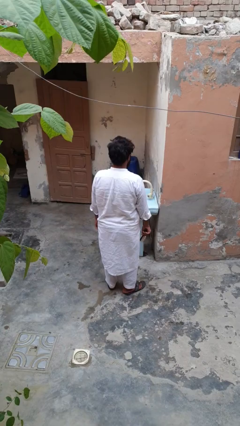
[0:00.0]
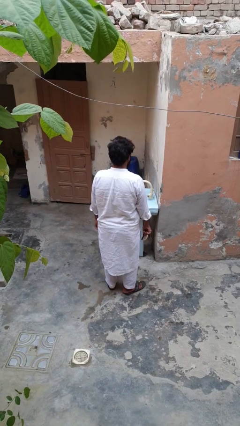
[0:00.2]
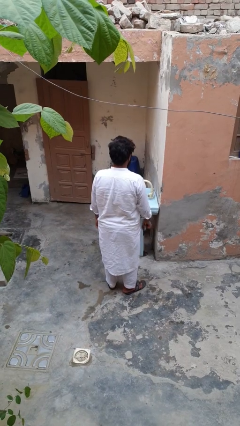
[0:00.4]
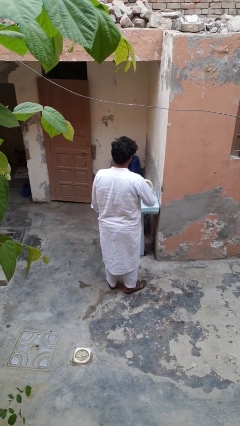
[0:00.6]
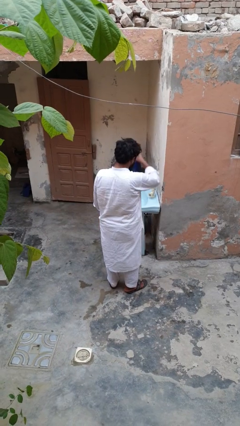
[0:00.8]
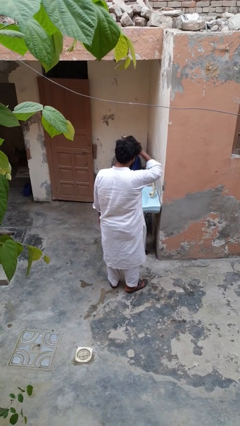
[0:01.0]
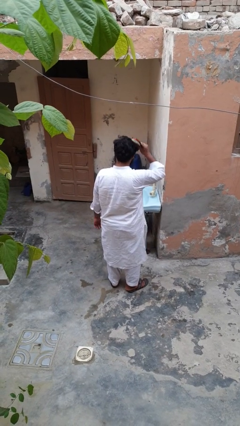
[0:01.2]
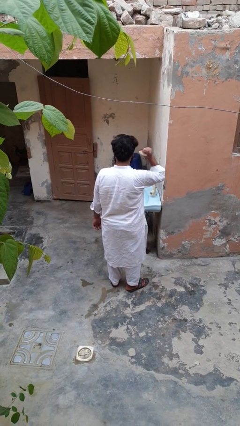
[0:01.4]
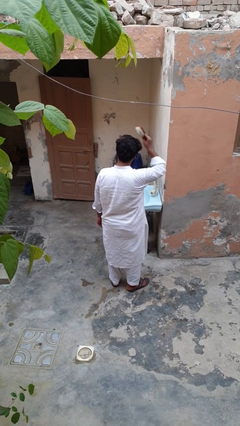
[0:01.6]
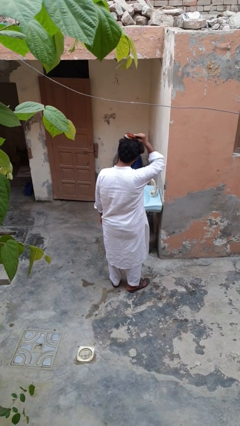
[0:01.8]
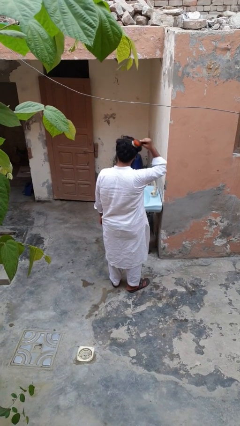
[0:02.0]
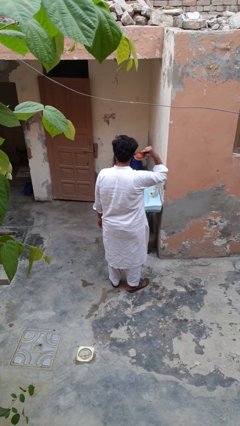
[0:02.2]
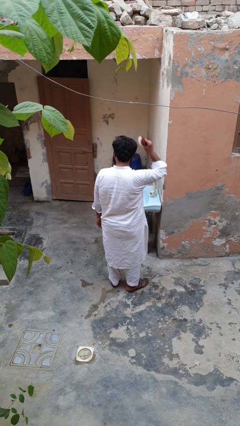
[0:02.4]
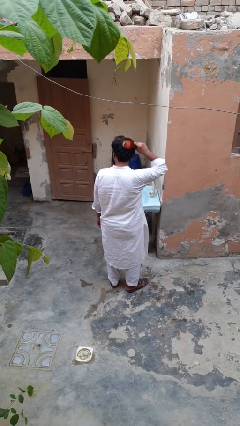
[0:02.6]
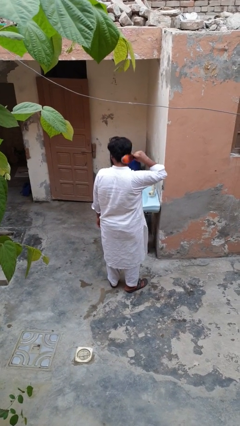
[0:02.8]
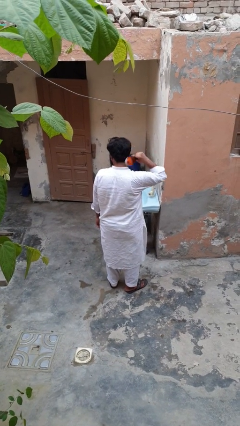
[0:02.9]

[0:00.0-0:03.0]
person brushes hair

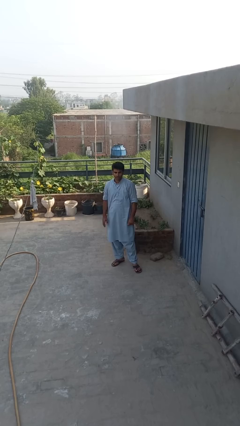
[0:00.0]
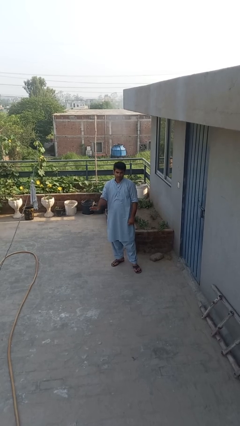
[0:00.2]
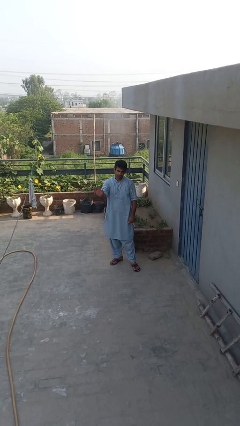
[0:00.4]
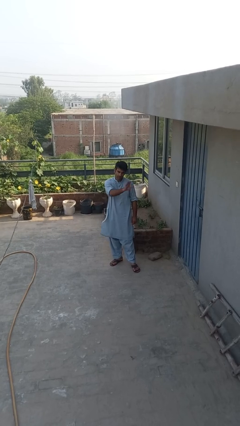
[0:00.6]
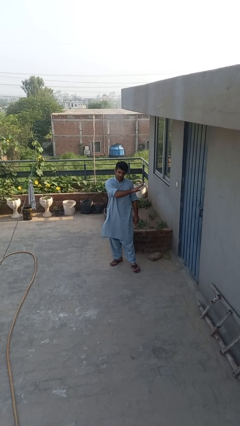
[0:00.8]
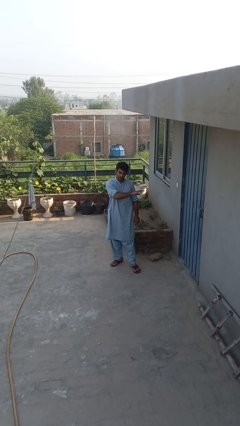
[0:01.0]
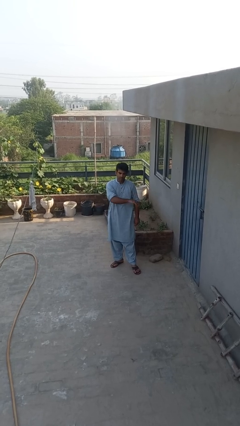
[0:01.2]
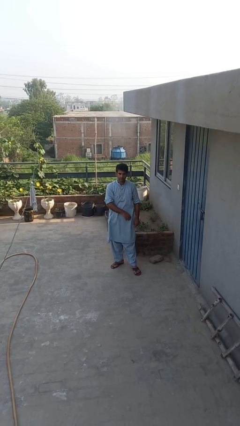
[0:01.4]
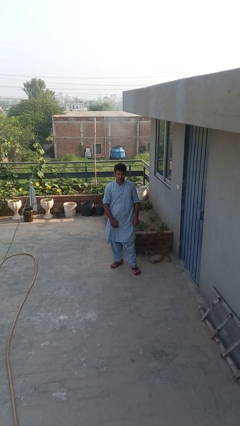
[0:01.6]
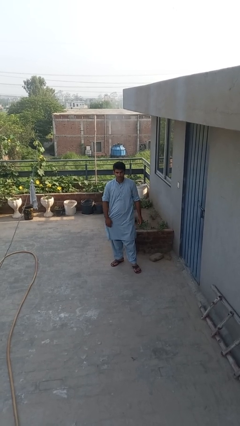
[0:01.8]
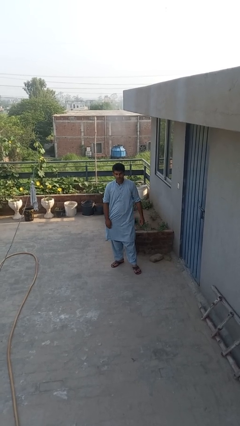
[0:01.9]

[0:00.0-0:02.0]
person gestures swipe left

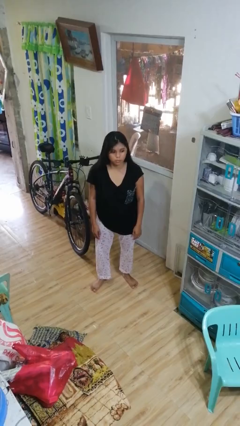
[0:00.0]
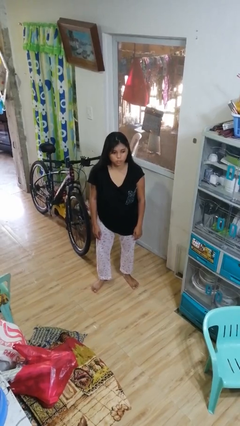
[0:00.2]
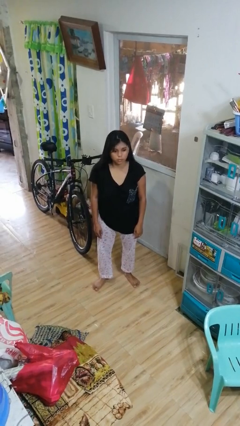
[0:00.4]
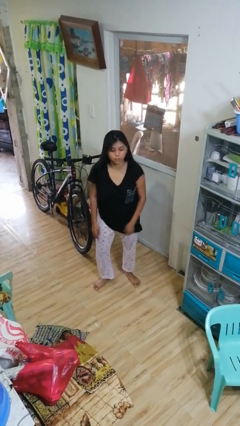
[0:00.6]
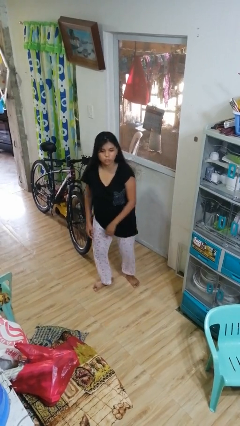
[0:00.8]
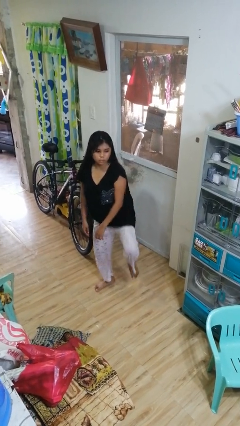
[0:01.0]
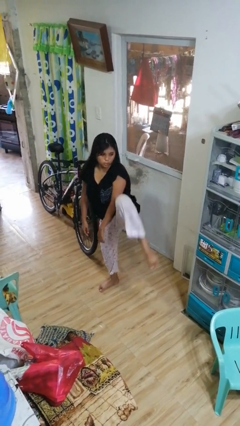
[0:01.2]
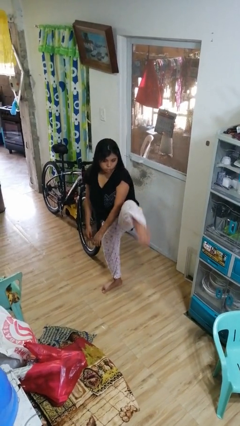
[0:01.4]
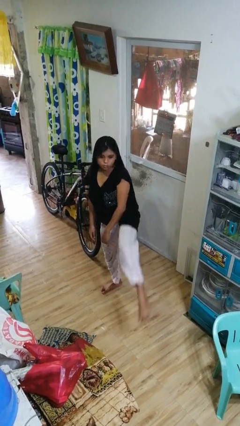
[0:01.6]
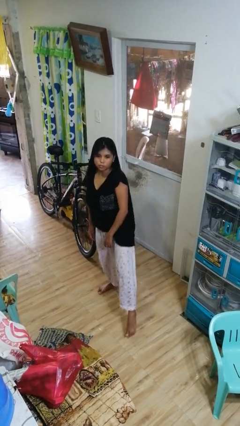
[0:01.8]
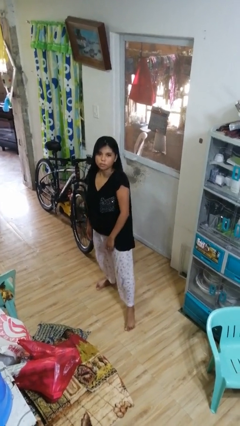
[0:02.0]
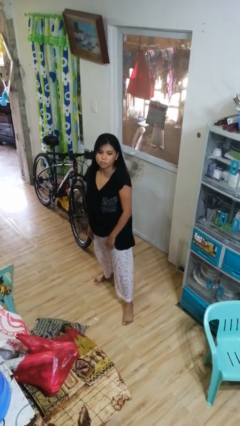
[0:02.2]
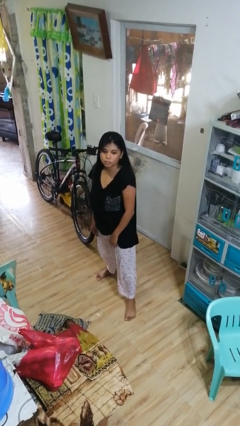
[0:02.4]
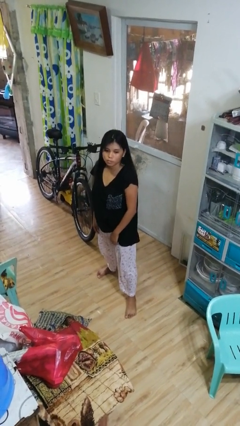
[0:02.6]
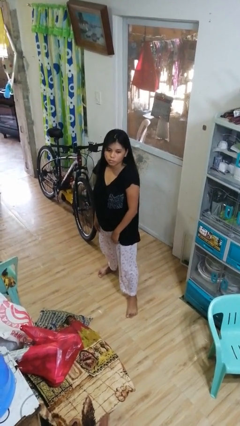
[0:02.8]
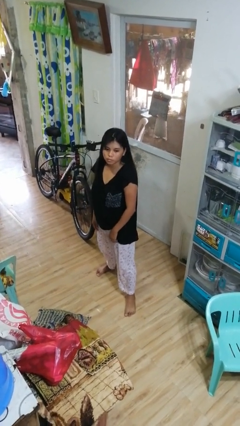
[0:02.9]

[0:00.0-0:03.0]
person karate kicks

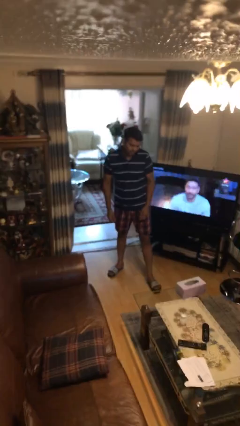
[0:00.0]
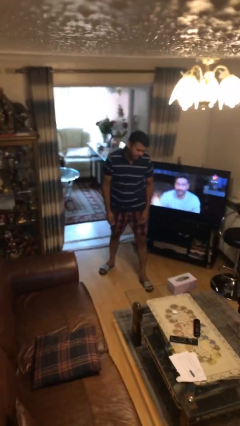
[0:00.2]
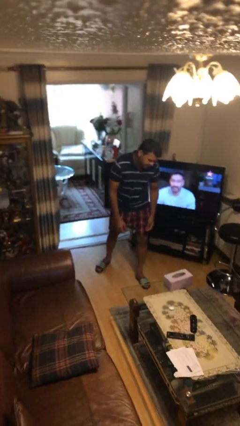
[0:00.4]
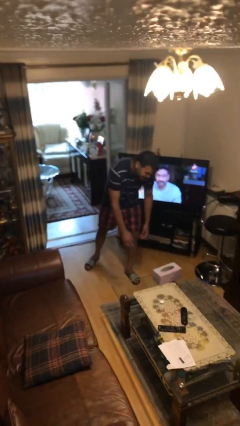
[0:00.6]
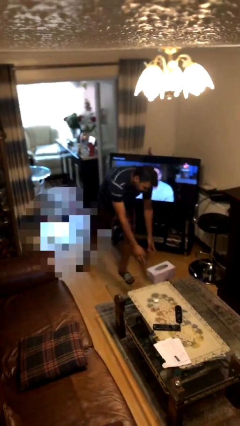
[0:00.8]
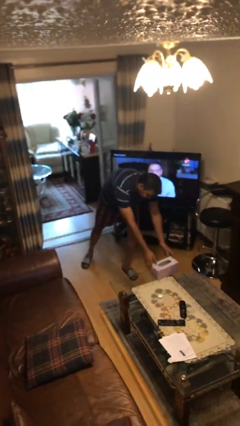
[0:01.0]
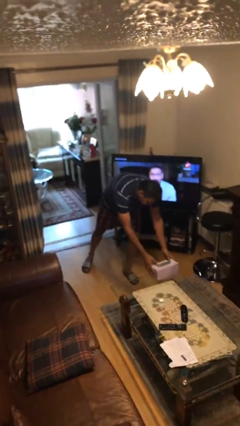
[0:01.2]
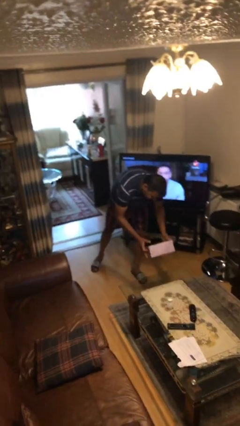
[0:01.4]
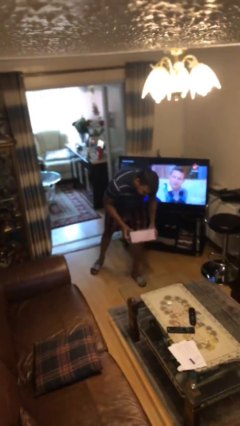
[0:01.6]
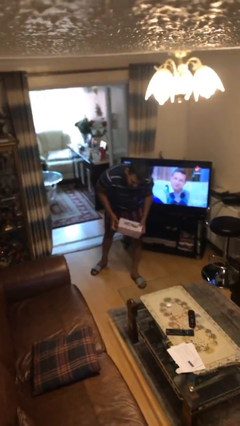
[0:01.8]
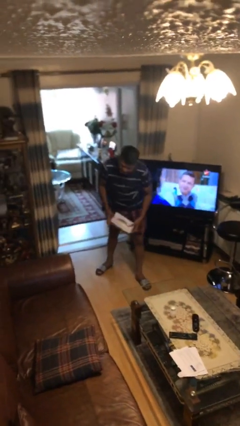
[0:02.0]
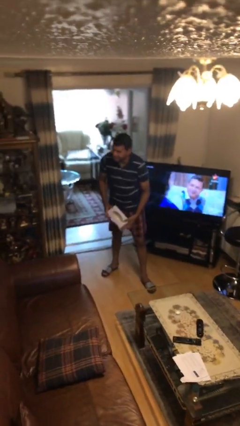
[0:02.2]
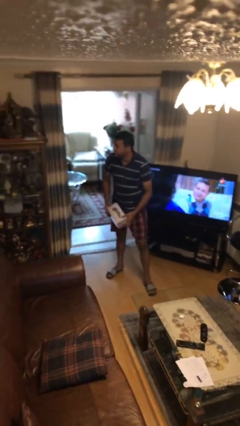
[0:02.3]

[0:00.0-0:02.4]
person picks up object from table

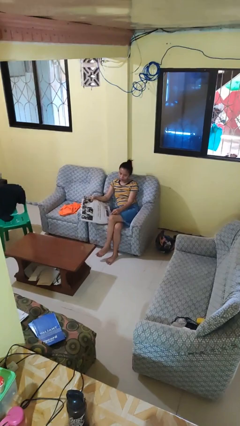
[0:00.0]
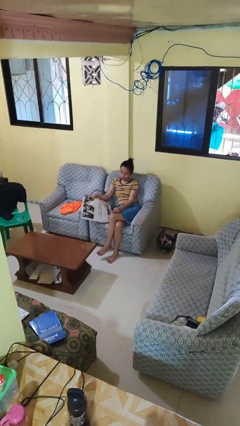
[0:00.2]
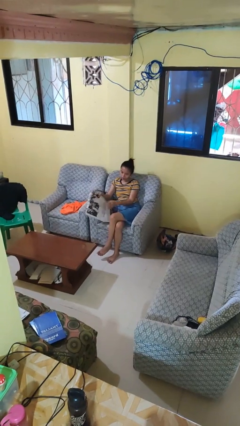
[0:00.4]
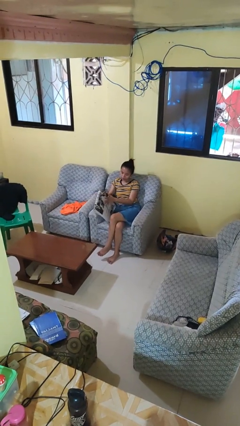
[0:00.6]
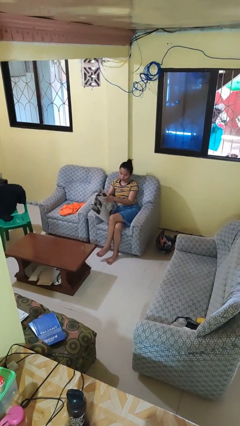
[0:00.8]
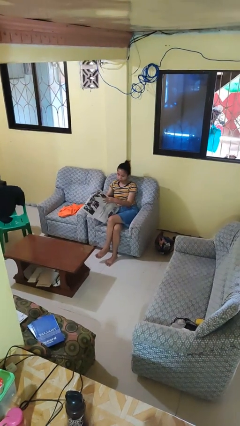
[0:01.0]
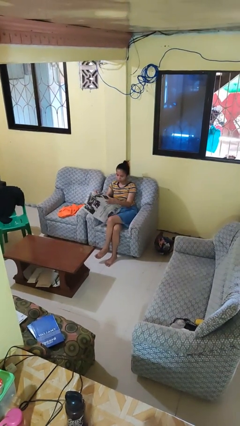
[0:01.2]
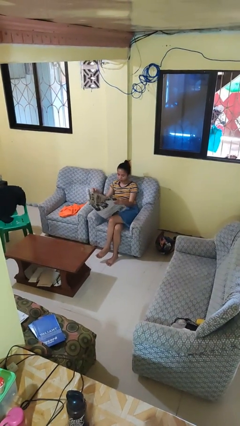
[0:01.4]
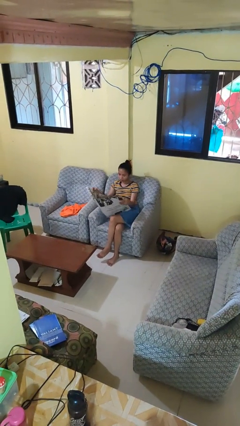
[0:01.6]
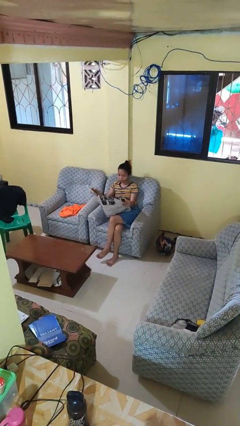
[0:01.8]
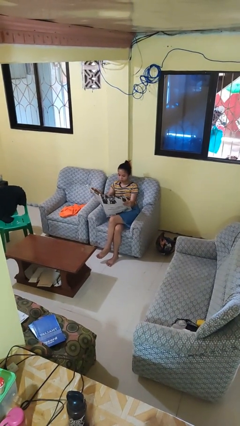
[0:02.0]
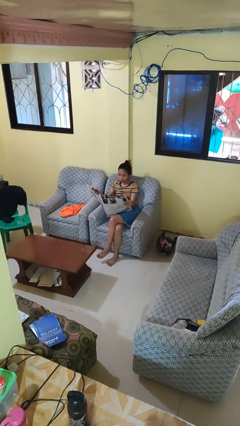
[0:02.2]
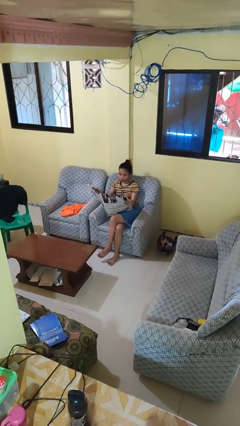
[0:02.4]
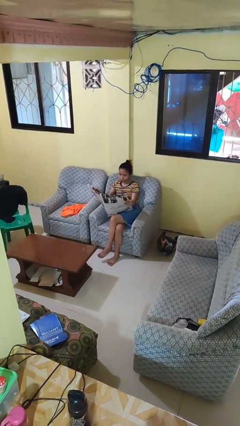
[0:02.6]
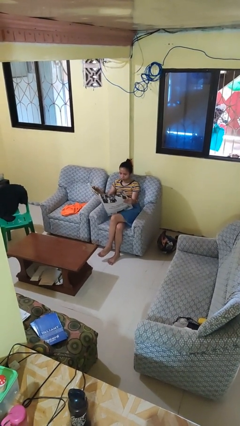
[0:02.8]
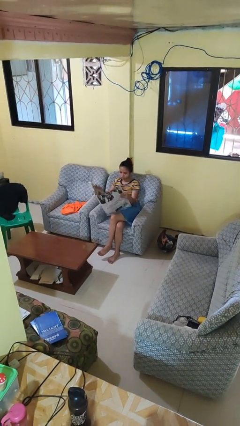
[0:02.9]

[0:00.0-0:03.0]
person reads newspaper

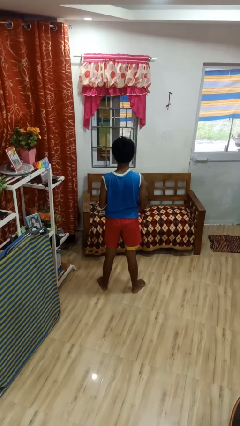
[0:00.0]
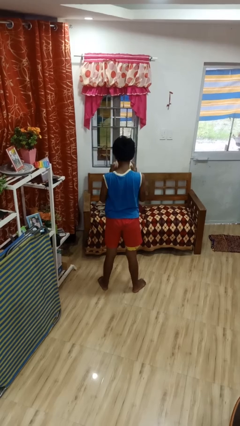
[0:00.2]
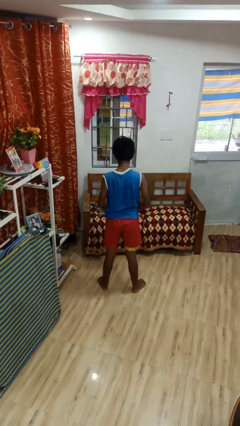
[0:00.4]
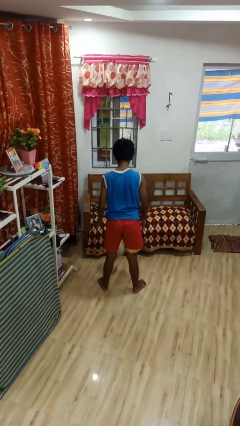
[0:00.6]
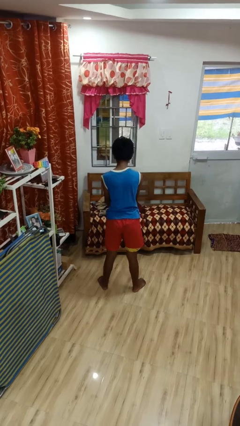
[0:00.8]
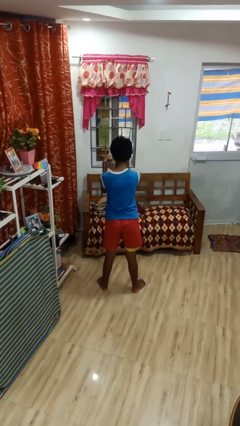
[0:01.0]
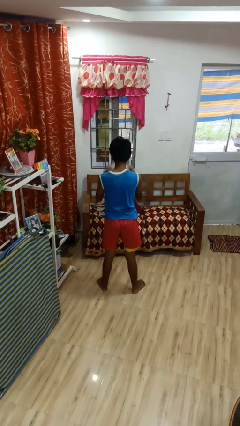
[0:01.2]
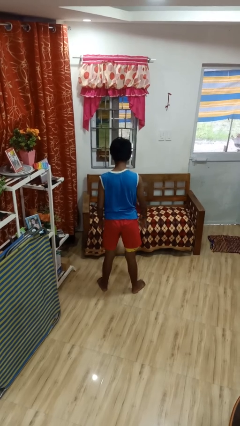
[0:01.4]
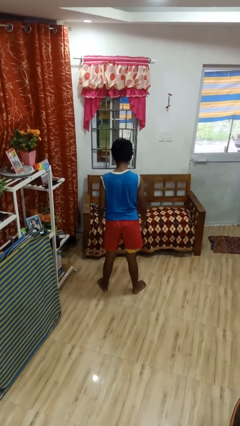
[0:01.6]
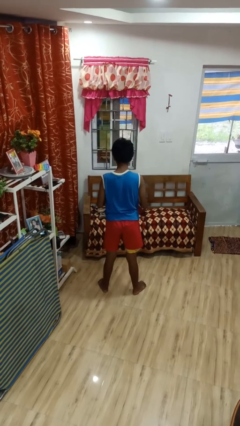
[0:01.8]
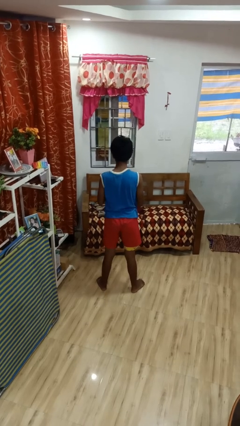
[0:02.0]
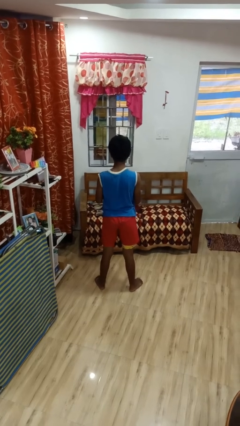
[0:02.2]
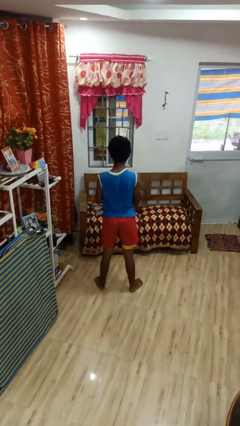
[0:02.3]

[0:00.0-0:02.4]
person bounces ball on floor

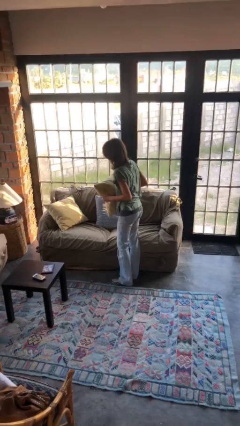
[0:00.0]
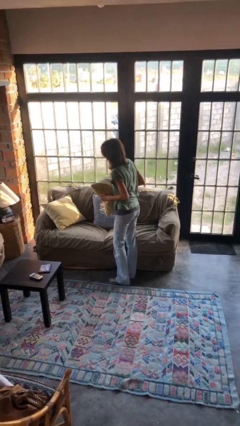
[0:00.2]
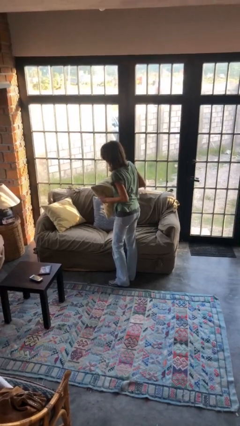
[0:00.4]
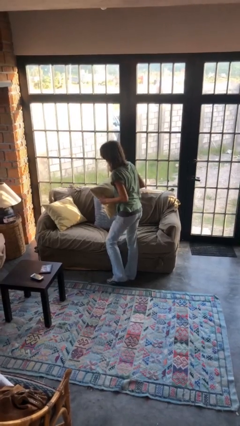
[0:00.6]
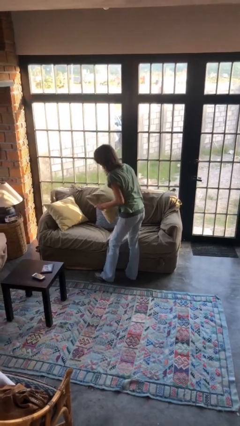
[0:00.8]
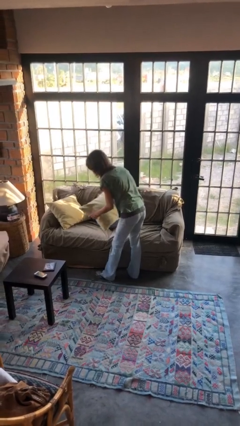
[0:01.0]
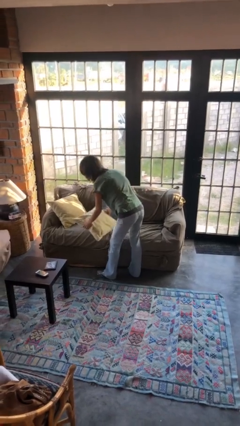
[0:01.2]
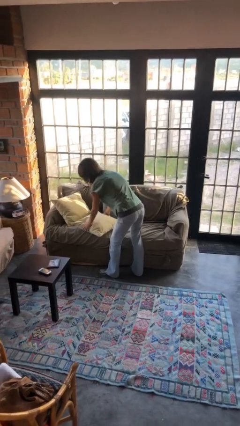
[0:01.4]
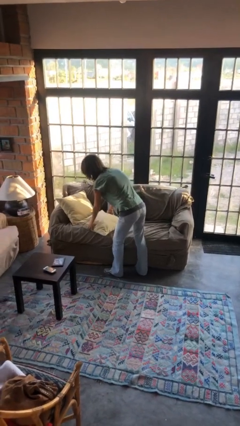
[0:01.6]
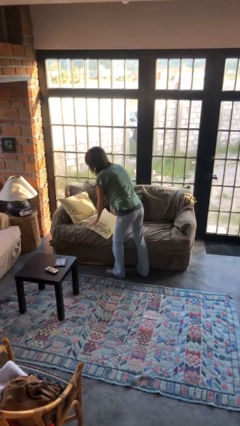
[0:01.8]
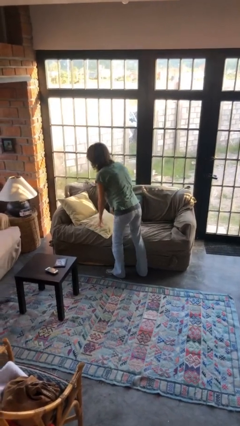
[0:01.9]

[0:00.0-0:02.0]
person puts down object on couch
